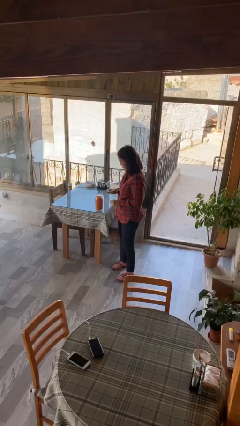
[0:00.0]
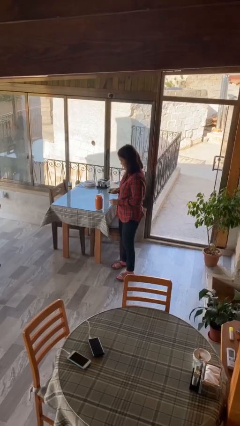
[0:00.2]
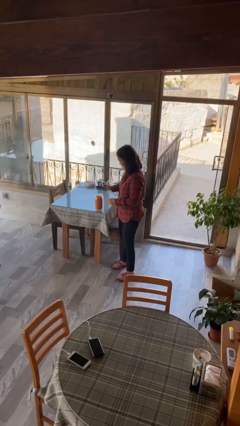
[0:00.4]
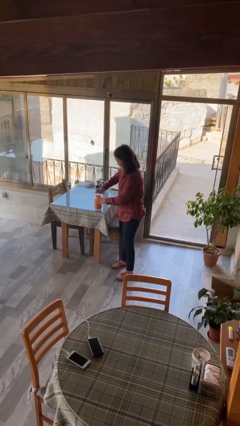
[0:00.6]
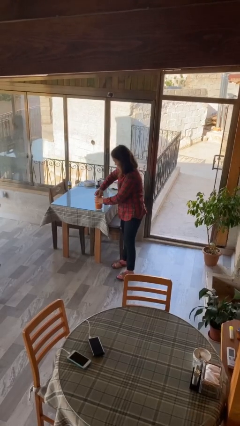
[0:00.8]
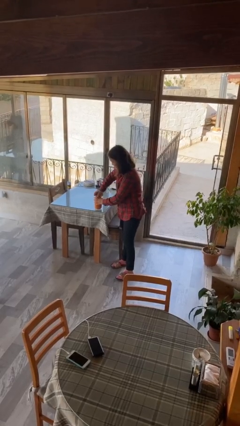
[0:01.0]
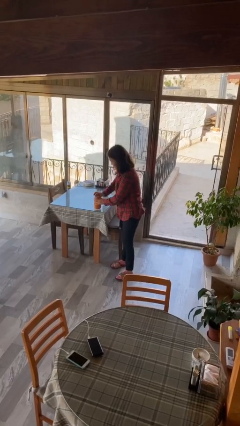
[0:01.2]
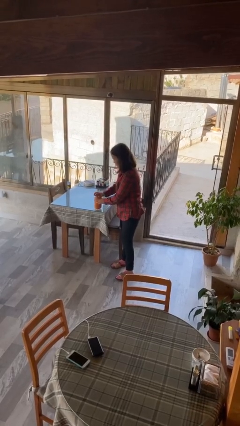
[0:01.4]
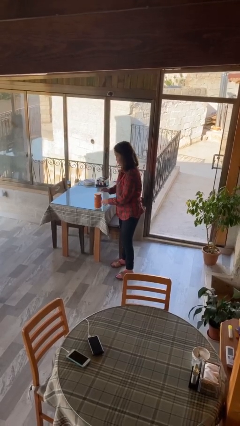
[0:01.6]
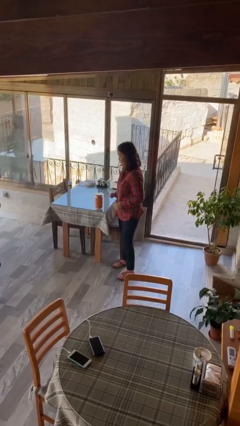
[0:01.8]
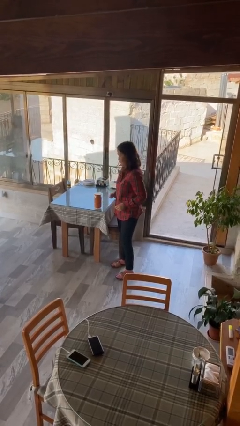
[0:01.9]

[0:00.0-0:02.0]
person closes jar

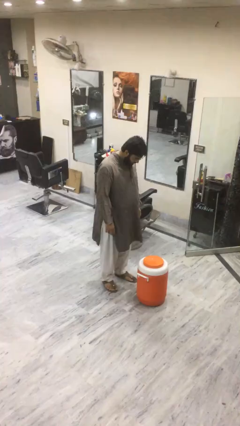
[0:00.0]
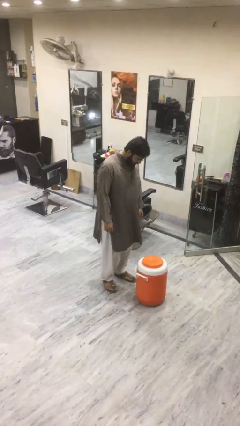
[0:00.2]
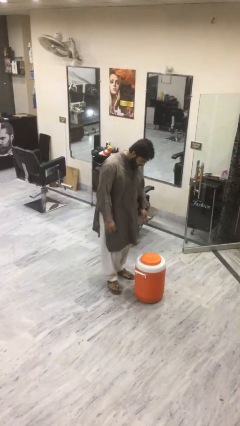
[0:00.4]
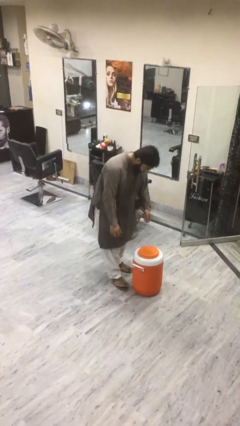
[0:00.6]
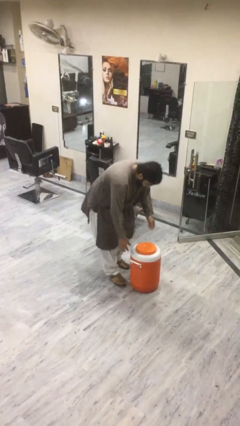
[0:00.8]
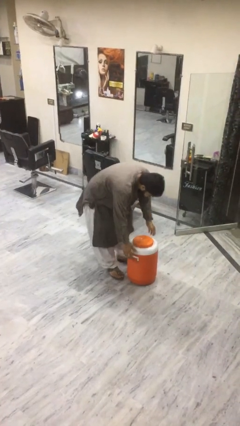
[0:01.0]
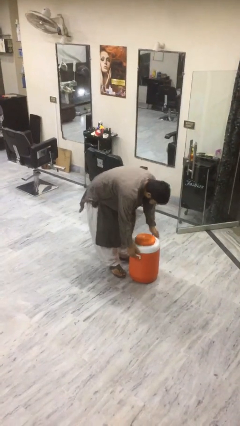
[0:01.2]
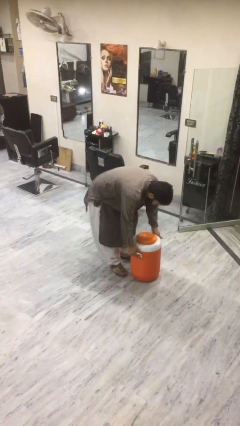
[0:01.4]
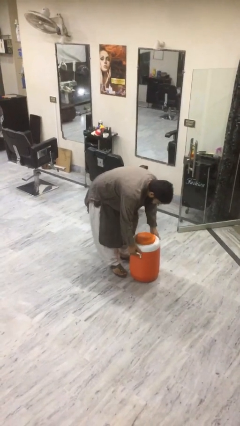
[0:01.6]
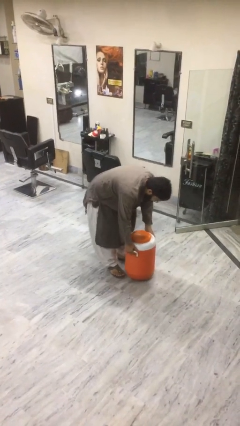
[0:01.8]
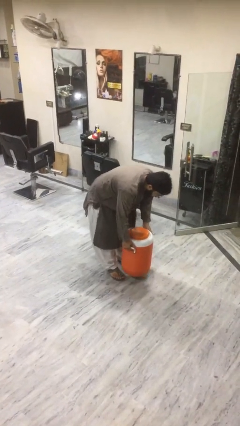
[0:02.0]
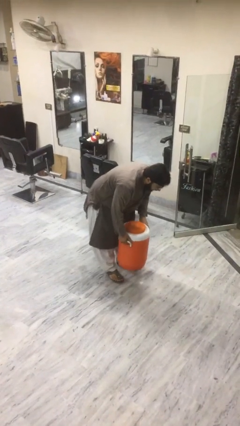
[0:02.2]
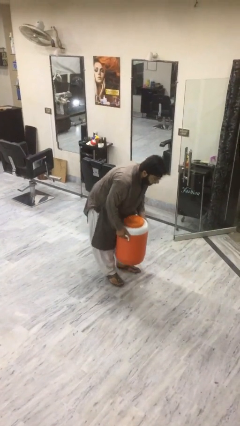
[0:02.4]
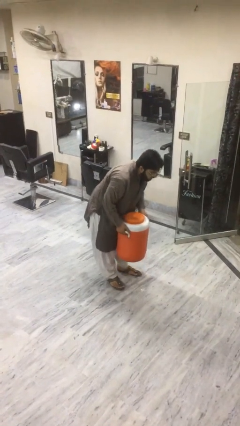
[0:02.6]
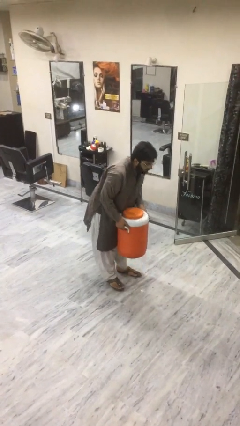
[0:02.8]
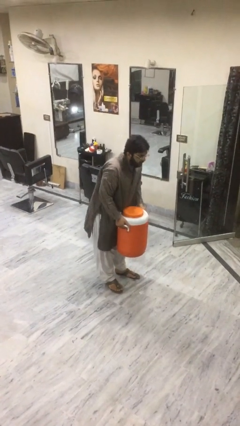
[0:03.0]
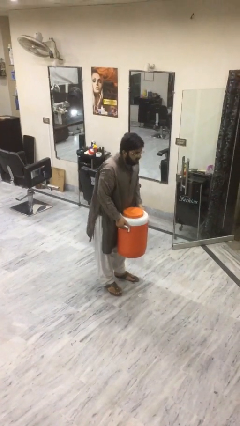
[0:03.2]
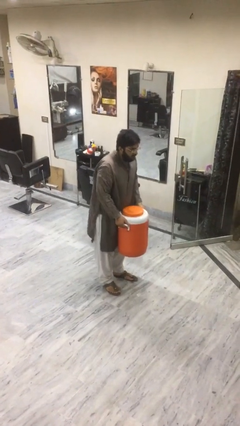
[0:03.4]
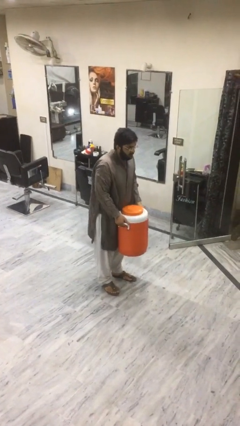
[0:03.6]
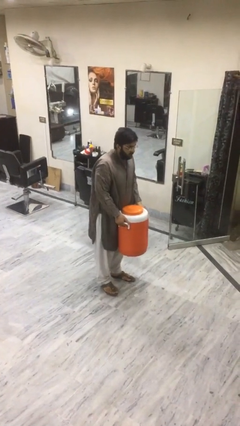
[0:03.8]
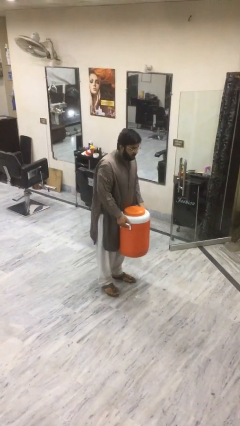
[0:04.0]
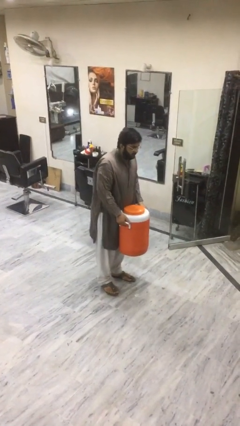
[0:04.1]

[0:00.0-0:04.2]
person picks up object from floor

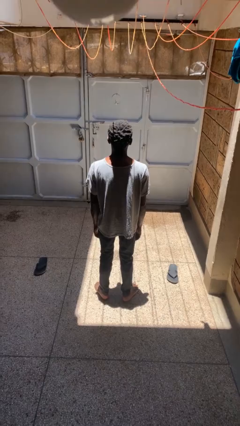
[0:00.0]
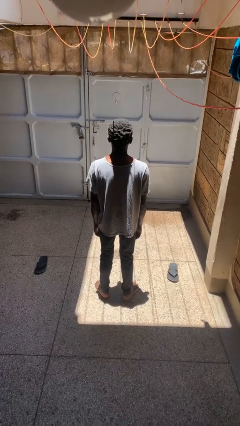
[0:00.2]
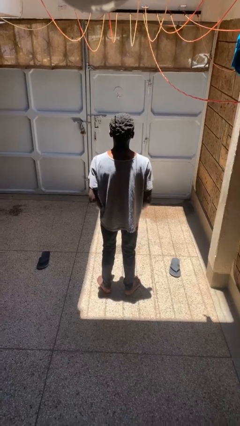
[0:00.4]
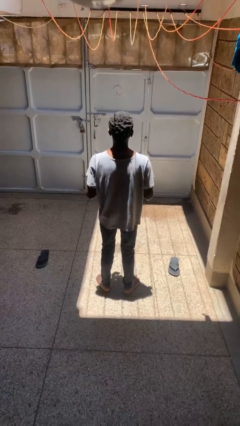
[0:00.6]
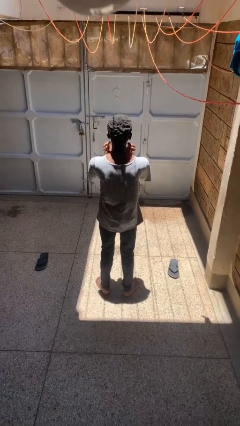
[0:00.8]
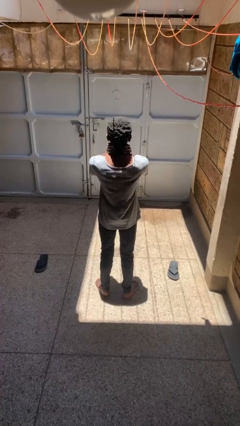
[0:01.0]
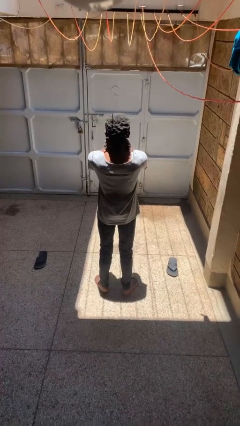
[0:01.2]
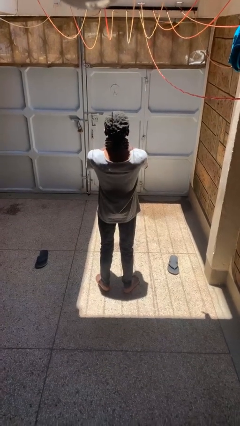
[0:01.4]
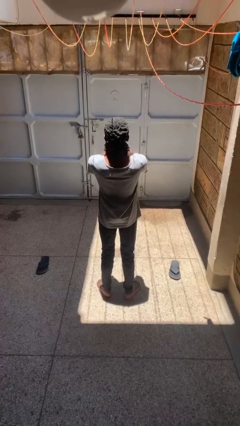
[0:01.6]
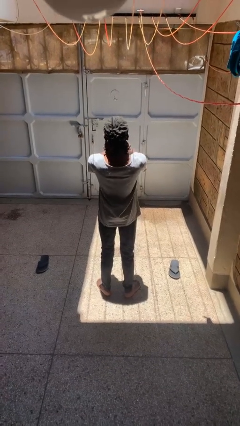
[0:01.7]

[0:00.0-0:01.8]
person rubs neck

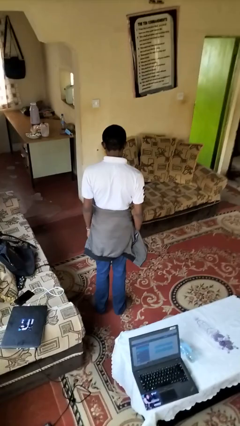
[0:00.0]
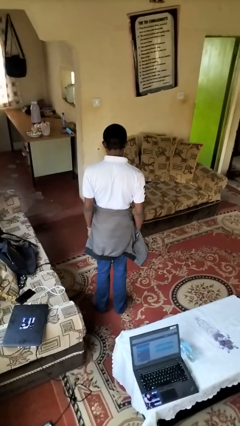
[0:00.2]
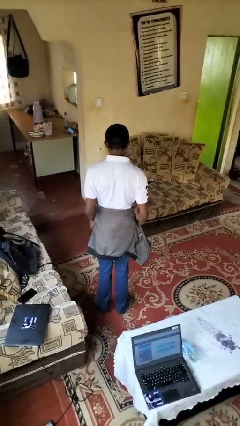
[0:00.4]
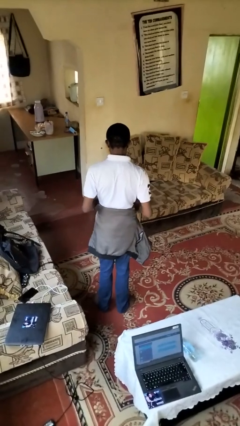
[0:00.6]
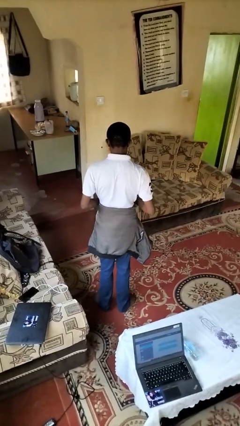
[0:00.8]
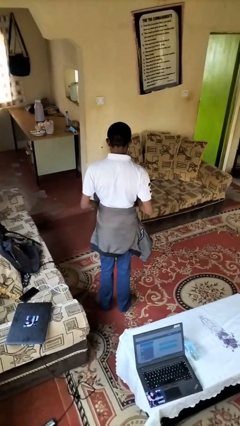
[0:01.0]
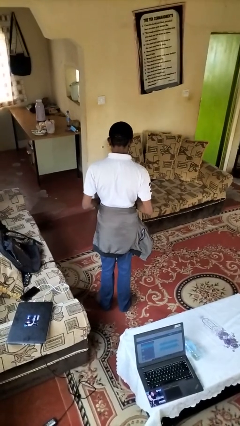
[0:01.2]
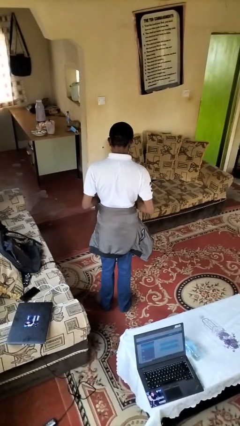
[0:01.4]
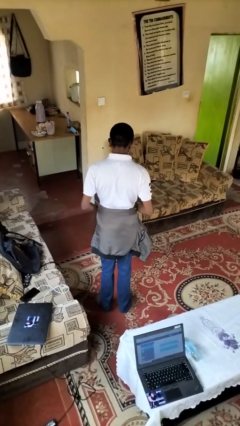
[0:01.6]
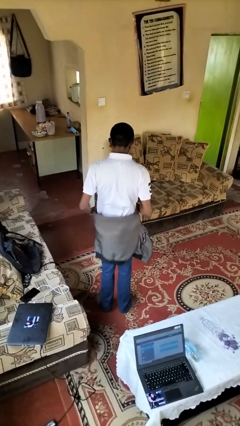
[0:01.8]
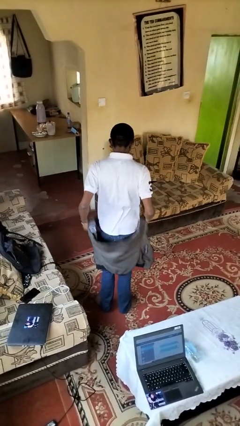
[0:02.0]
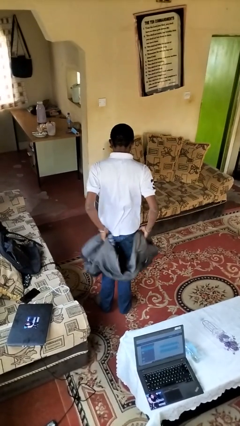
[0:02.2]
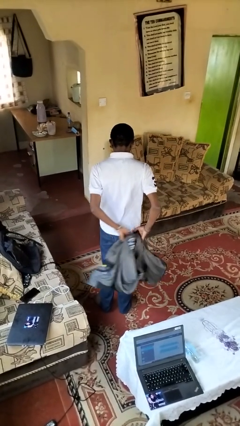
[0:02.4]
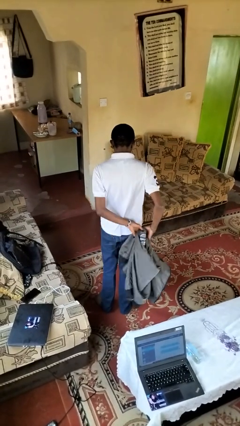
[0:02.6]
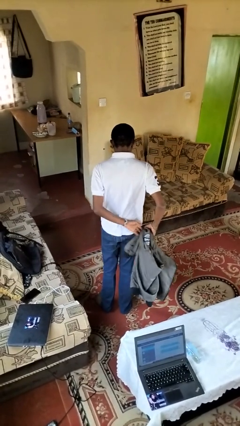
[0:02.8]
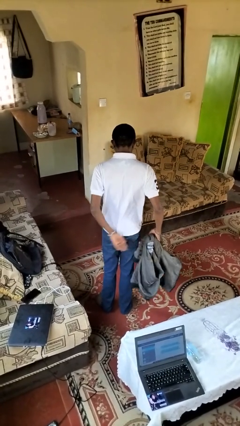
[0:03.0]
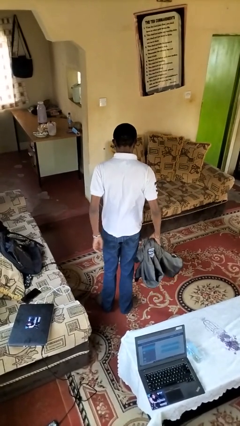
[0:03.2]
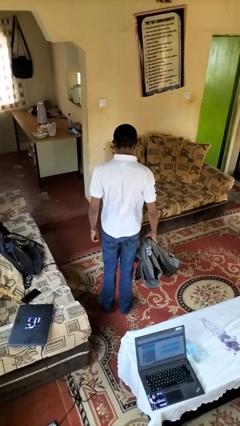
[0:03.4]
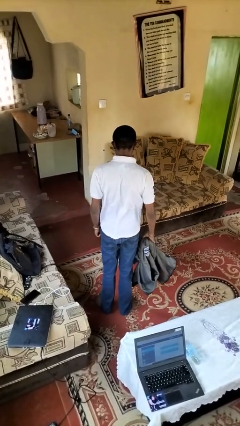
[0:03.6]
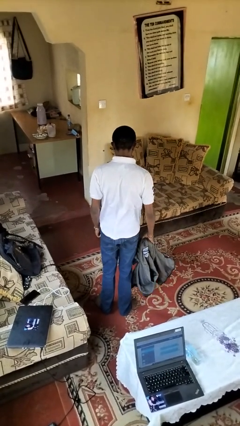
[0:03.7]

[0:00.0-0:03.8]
person unties jacket around waist

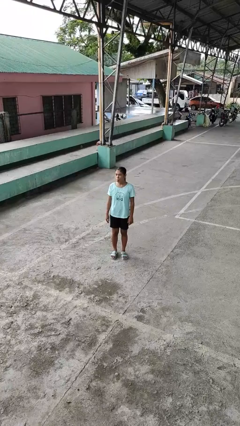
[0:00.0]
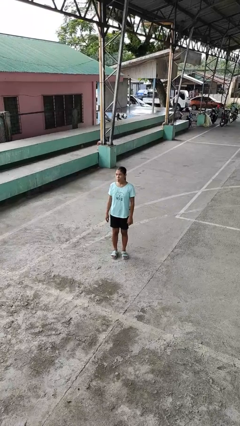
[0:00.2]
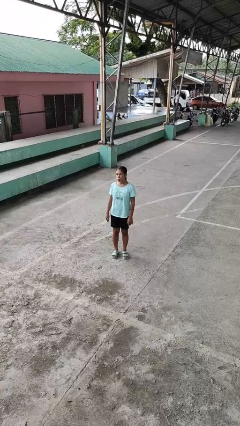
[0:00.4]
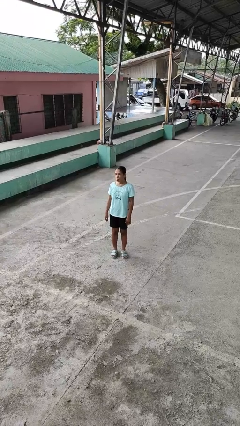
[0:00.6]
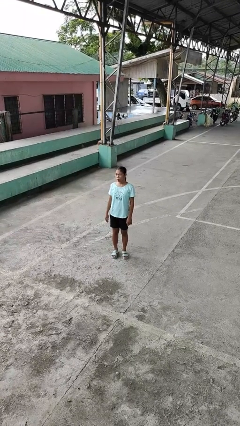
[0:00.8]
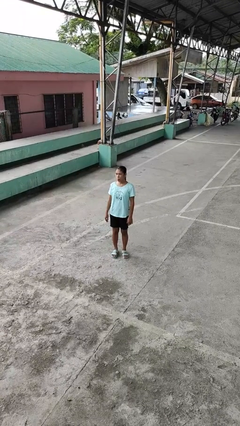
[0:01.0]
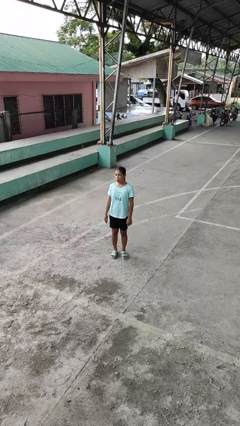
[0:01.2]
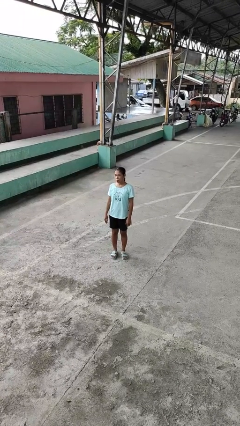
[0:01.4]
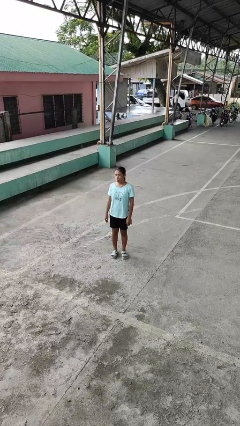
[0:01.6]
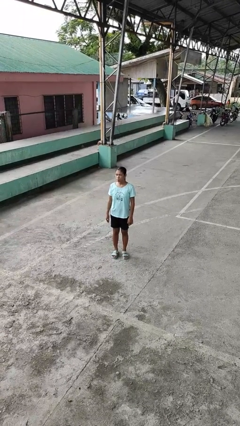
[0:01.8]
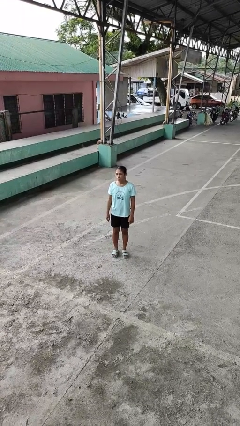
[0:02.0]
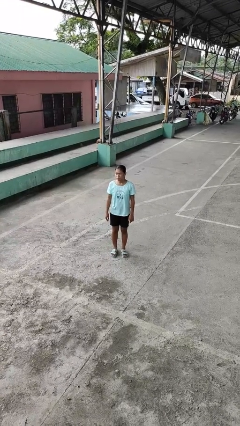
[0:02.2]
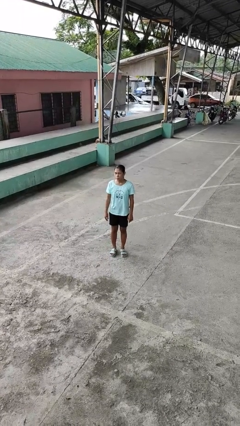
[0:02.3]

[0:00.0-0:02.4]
person sticks out tongue

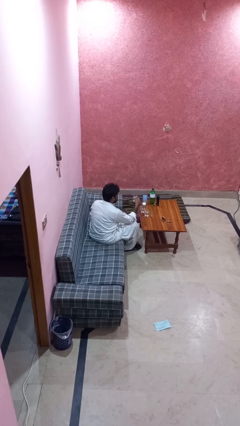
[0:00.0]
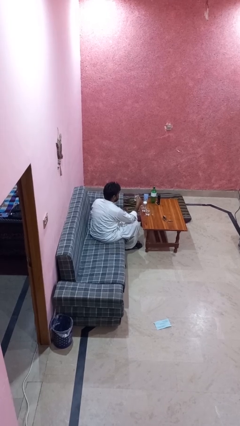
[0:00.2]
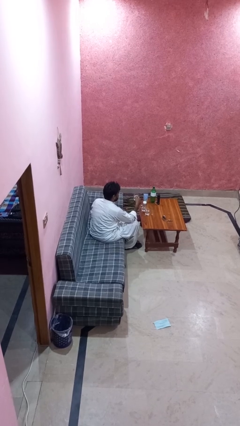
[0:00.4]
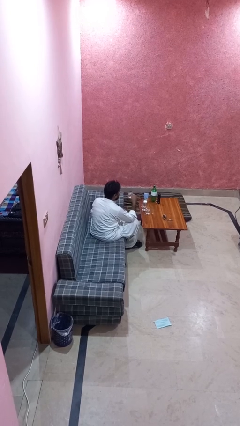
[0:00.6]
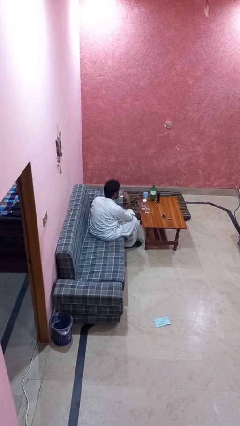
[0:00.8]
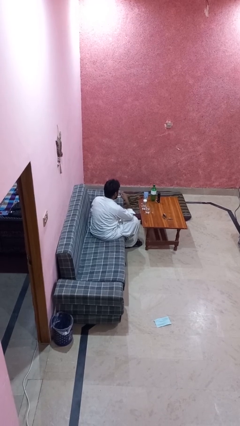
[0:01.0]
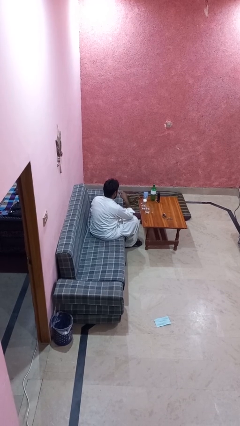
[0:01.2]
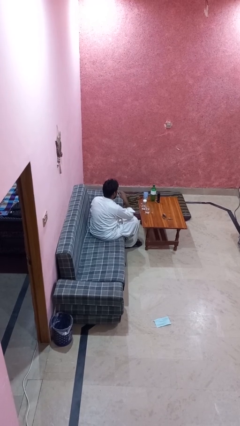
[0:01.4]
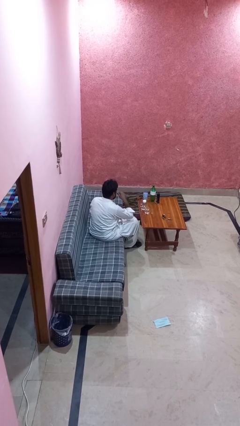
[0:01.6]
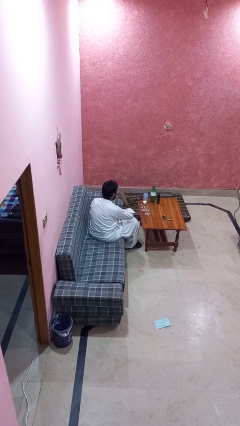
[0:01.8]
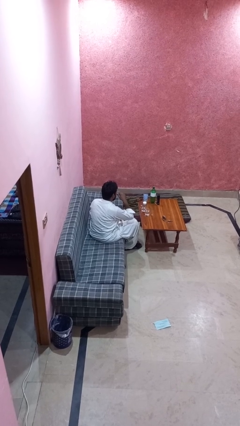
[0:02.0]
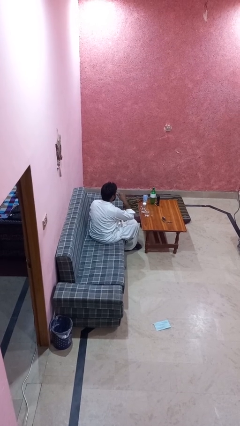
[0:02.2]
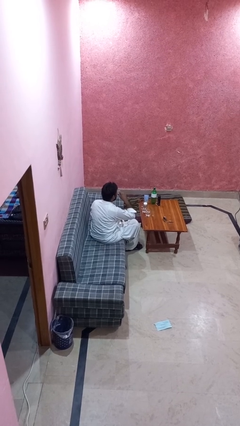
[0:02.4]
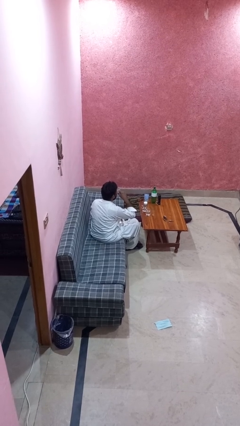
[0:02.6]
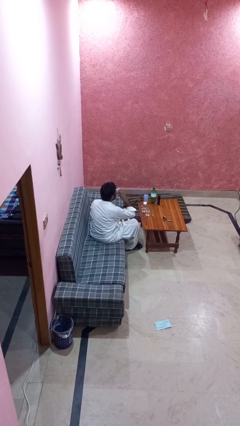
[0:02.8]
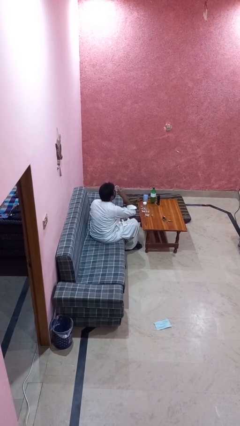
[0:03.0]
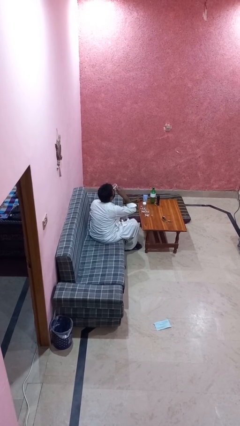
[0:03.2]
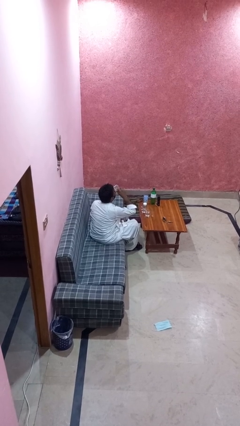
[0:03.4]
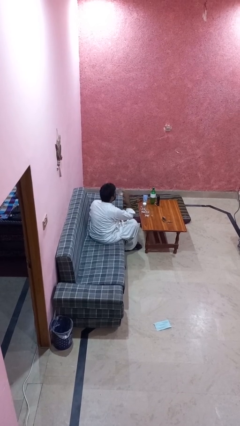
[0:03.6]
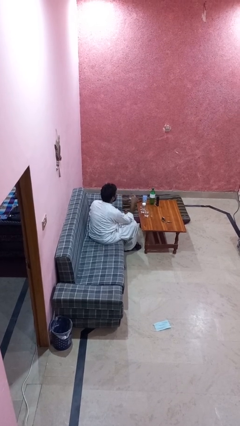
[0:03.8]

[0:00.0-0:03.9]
person drinks from shotglass
